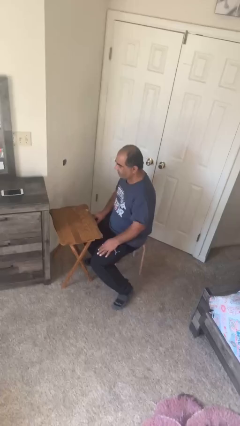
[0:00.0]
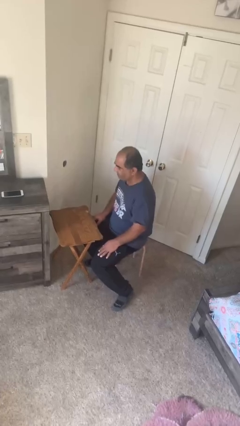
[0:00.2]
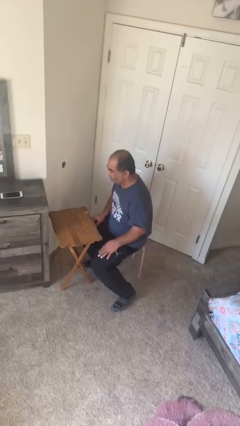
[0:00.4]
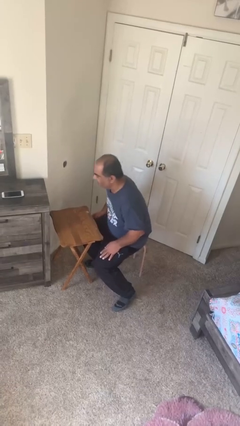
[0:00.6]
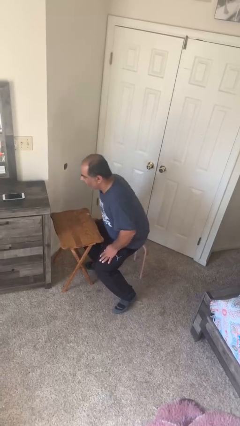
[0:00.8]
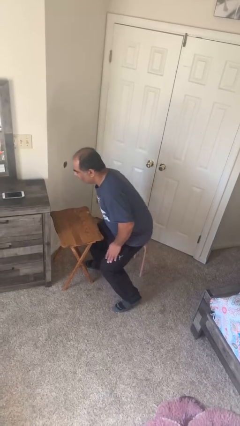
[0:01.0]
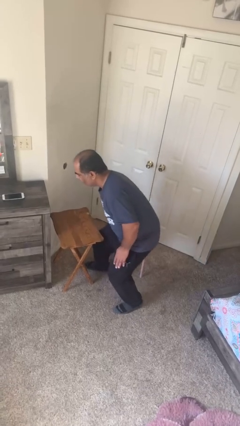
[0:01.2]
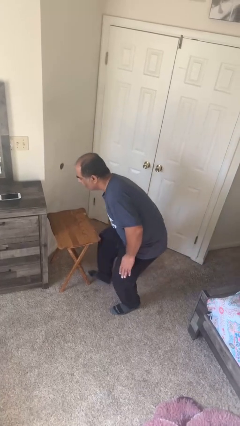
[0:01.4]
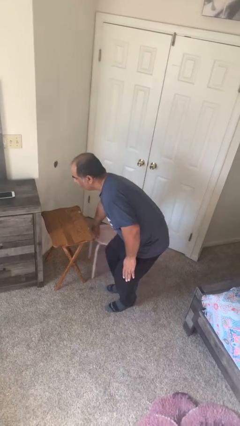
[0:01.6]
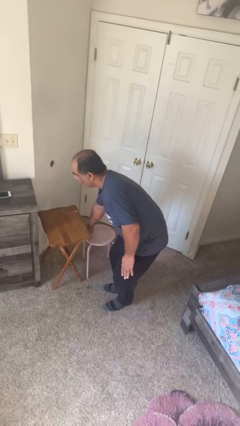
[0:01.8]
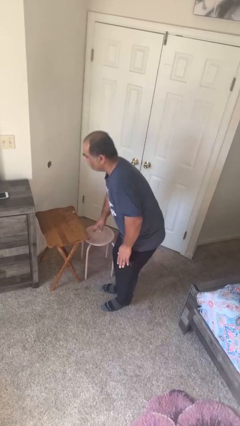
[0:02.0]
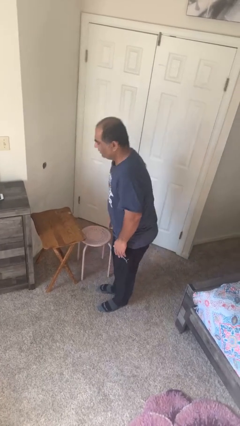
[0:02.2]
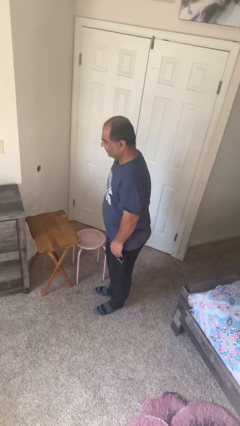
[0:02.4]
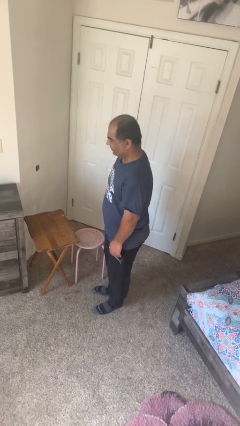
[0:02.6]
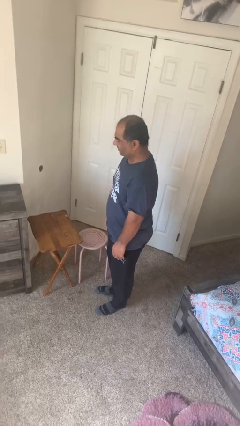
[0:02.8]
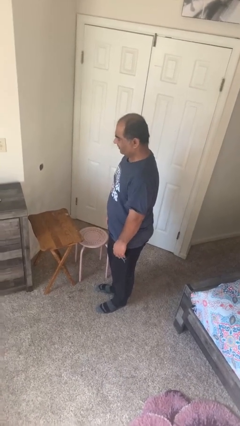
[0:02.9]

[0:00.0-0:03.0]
person stands up

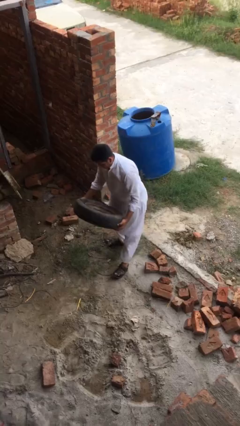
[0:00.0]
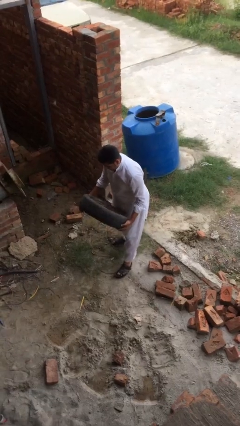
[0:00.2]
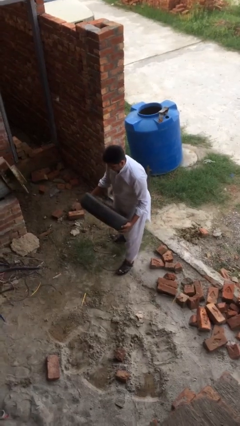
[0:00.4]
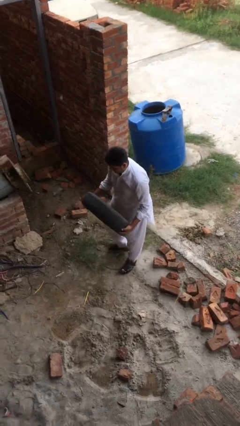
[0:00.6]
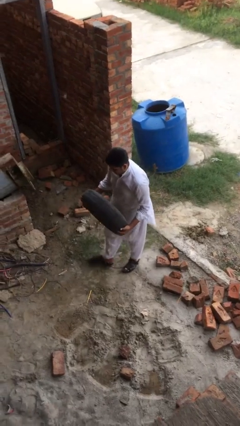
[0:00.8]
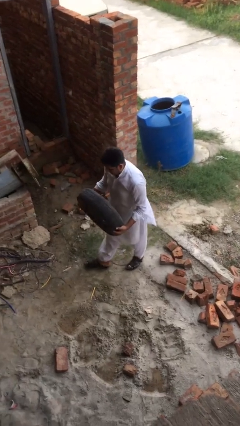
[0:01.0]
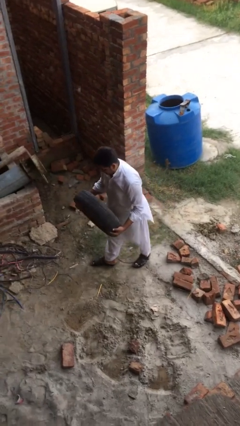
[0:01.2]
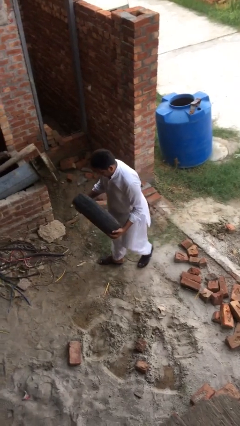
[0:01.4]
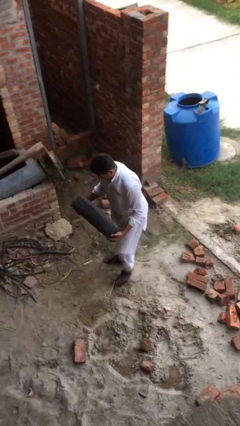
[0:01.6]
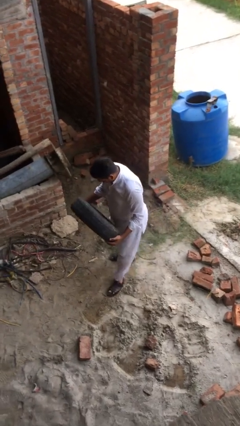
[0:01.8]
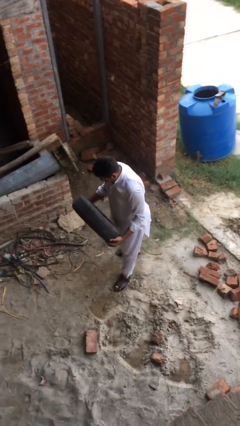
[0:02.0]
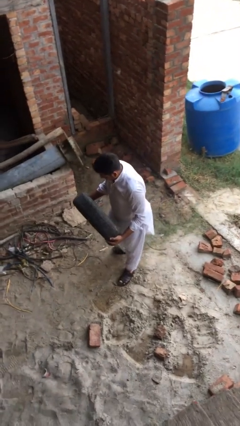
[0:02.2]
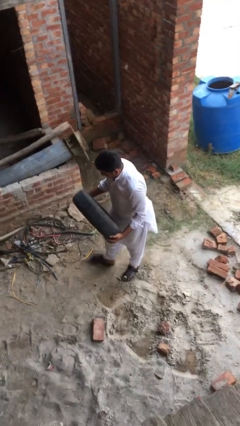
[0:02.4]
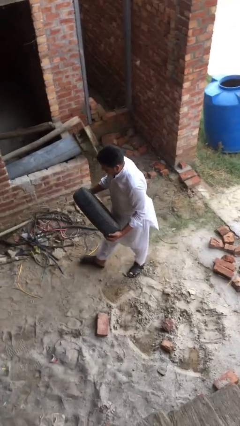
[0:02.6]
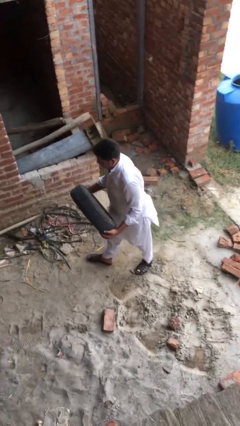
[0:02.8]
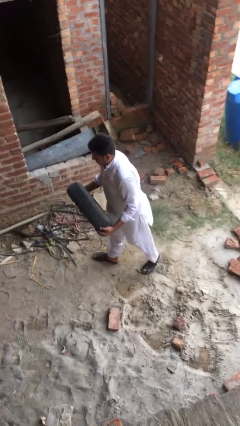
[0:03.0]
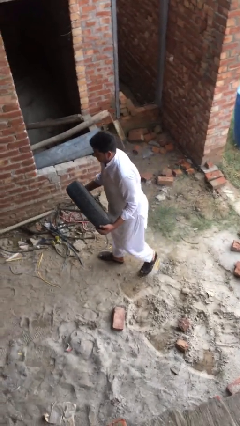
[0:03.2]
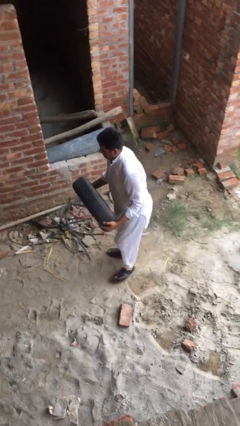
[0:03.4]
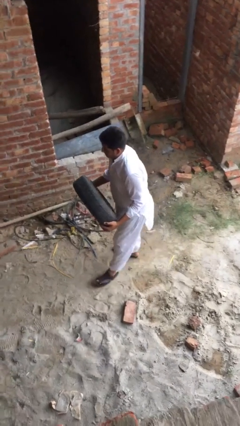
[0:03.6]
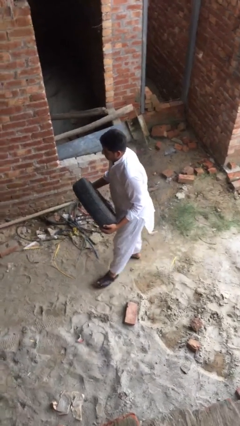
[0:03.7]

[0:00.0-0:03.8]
person carries heavy object

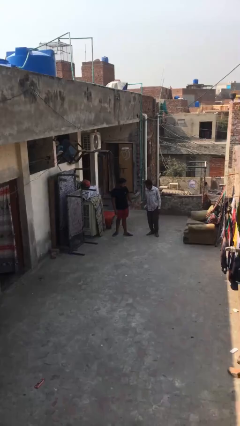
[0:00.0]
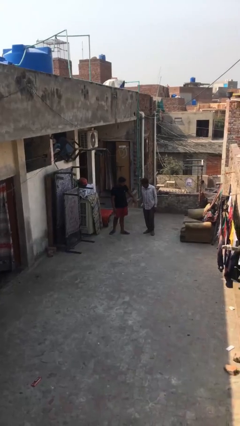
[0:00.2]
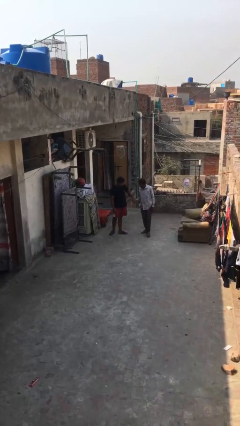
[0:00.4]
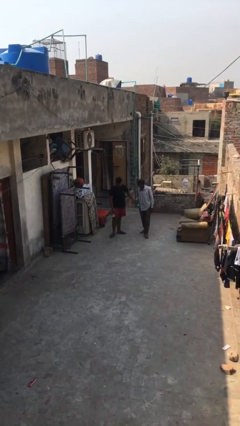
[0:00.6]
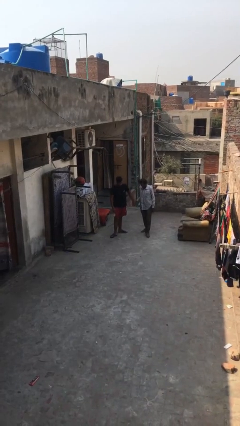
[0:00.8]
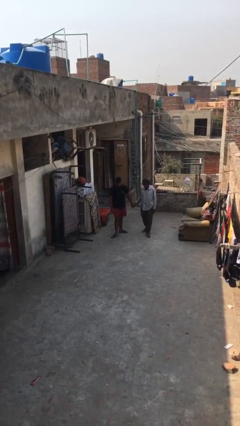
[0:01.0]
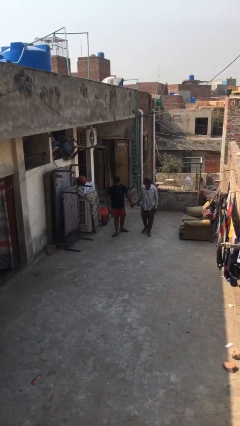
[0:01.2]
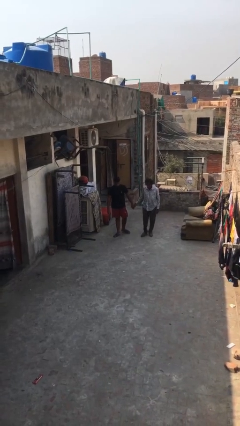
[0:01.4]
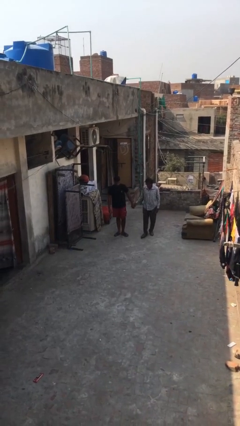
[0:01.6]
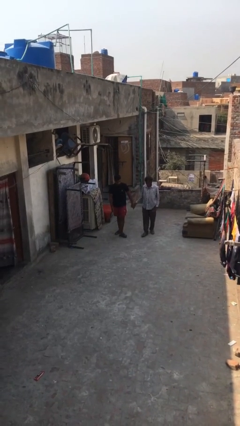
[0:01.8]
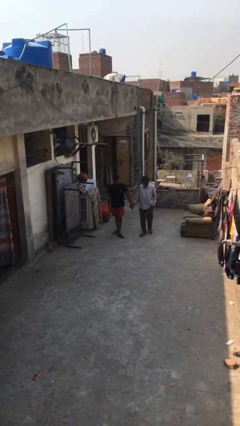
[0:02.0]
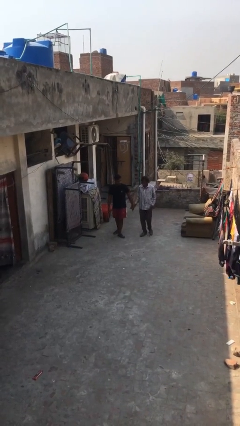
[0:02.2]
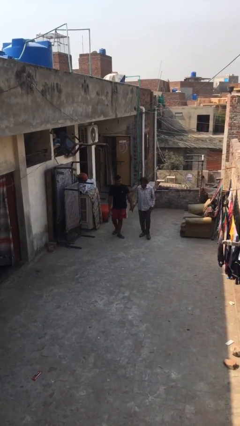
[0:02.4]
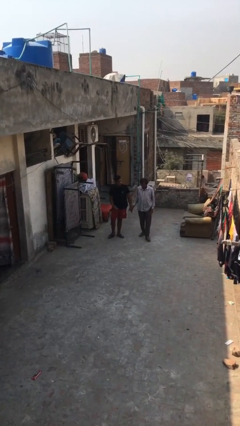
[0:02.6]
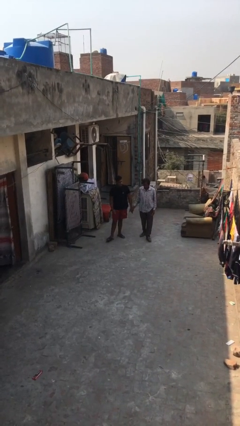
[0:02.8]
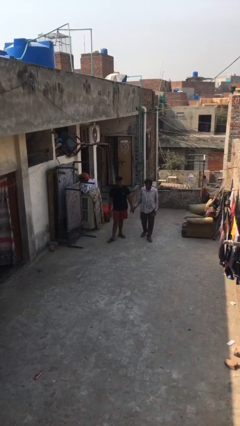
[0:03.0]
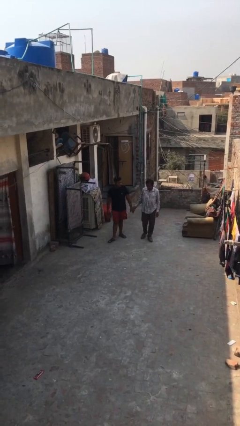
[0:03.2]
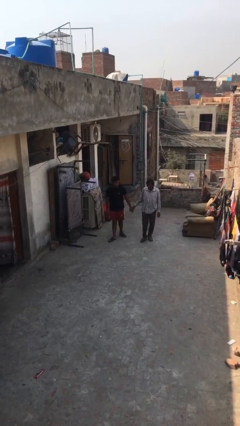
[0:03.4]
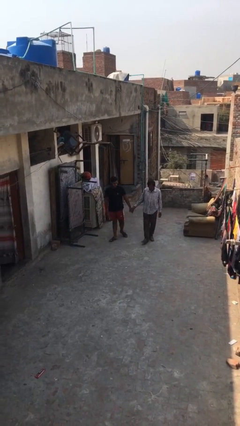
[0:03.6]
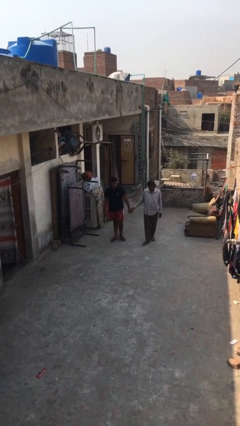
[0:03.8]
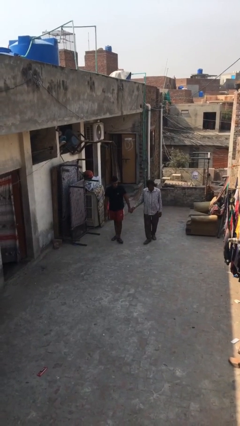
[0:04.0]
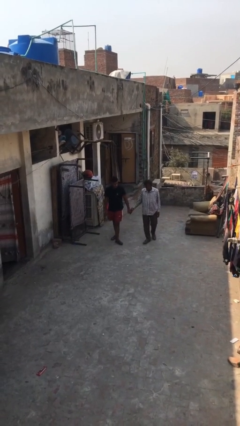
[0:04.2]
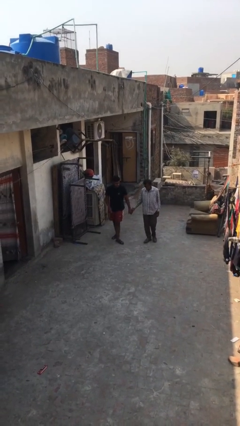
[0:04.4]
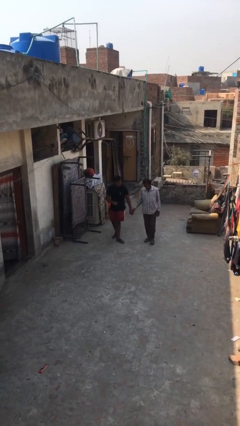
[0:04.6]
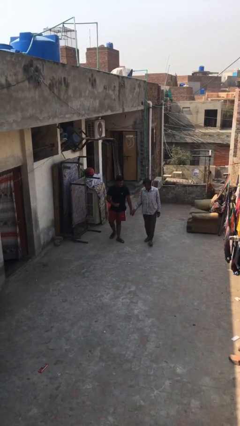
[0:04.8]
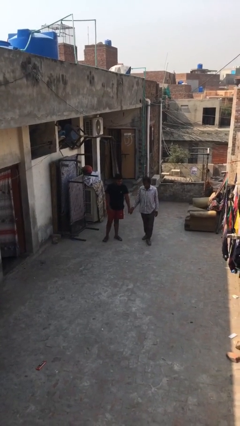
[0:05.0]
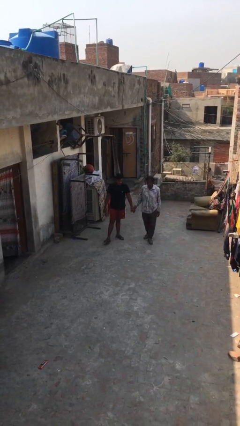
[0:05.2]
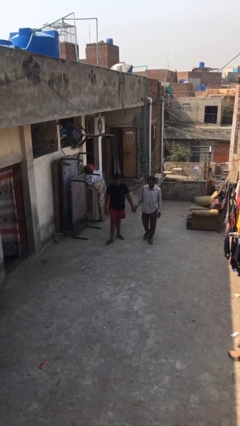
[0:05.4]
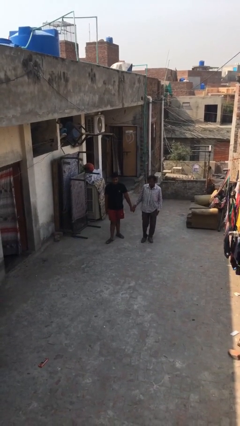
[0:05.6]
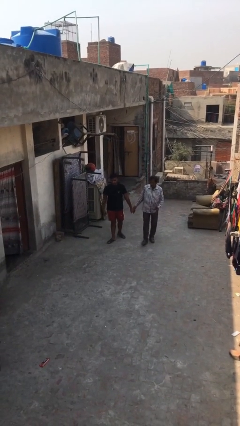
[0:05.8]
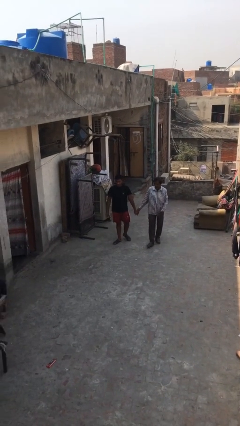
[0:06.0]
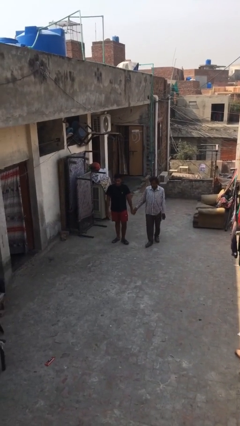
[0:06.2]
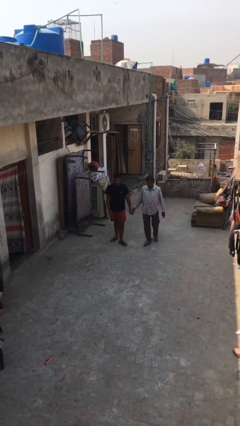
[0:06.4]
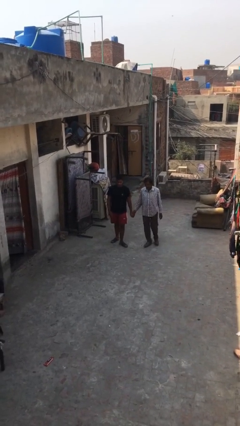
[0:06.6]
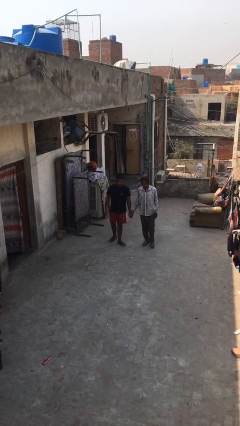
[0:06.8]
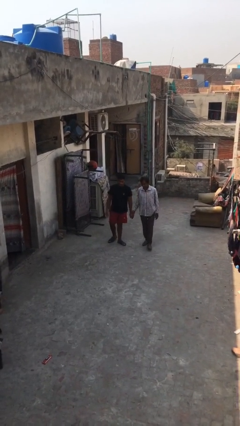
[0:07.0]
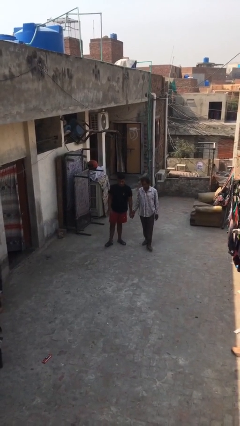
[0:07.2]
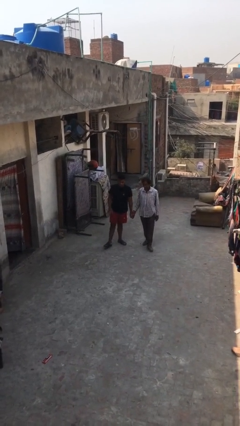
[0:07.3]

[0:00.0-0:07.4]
person holds hand

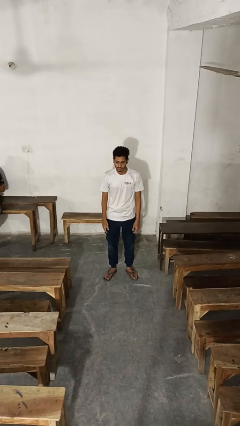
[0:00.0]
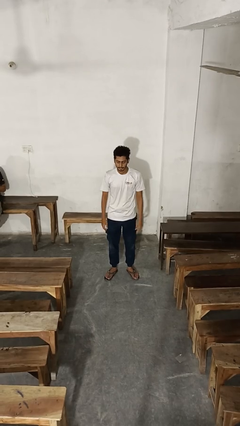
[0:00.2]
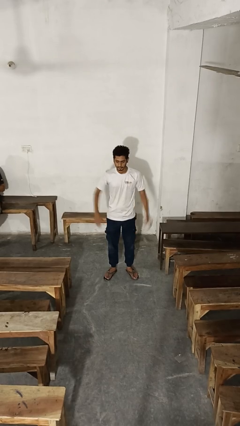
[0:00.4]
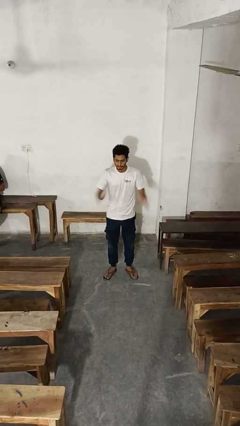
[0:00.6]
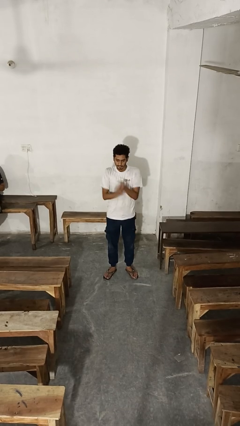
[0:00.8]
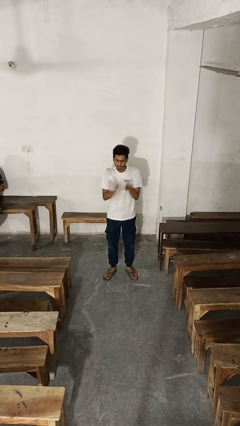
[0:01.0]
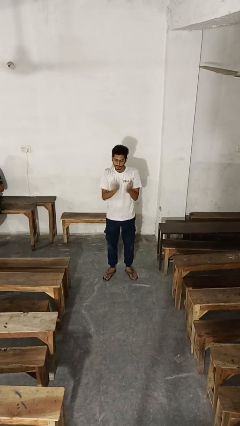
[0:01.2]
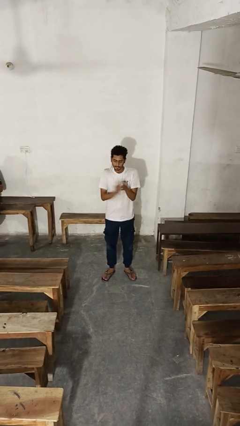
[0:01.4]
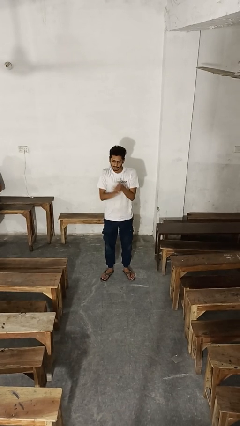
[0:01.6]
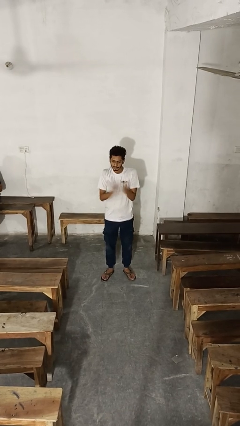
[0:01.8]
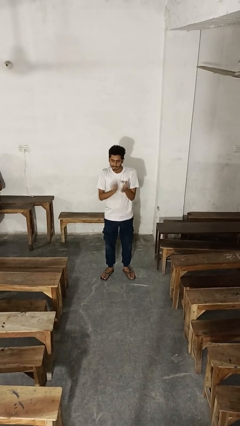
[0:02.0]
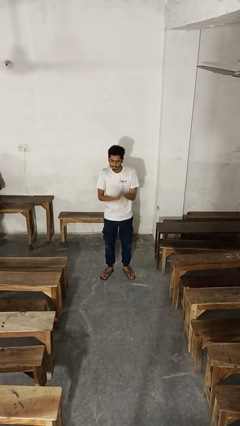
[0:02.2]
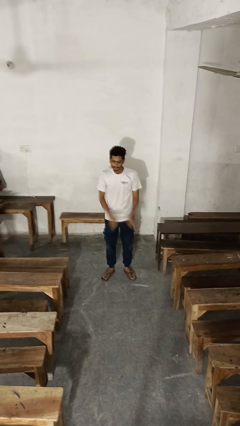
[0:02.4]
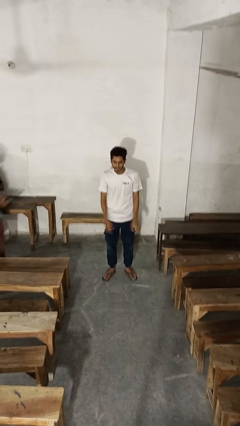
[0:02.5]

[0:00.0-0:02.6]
person claps hands

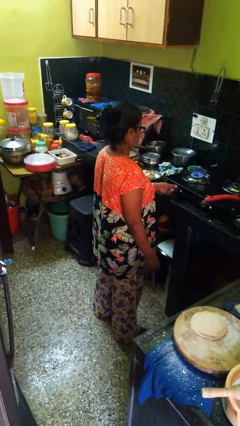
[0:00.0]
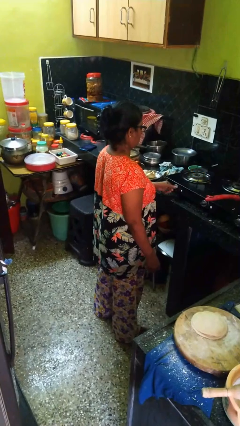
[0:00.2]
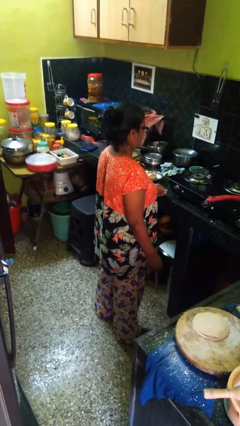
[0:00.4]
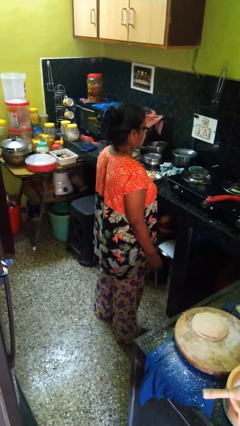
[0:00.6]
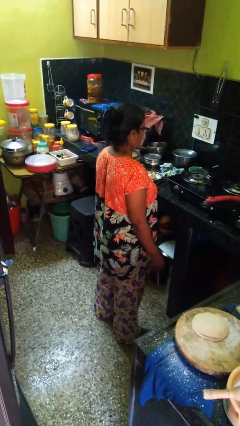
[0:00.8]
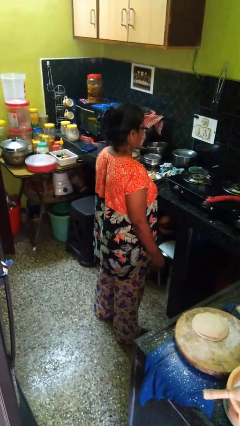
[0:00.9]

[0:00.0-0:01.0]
person turns off stovetop
